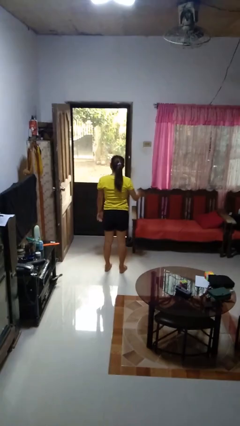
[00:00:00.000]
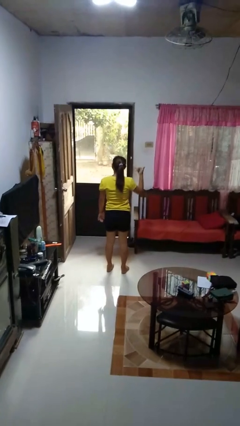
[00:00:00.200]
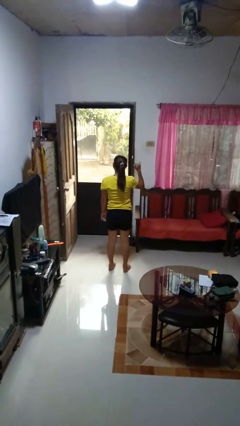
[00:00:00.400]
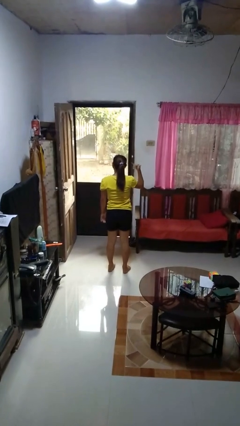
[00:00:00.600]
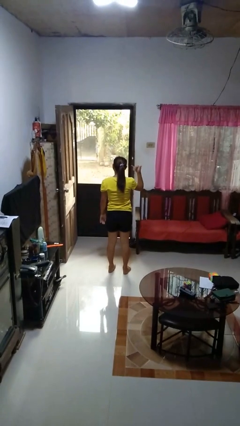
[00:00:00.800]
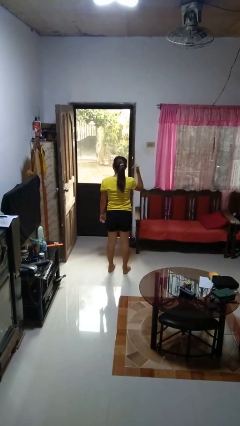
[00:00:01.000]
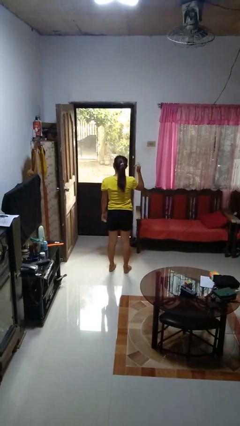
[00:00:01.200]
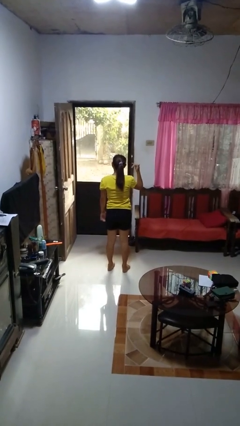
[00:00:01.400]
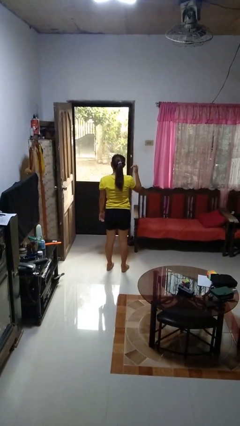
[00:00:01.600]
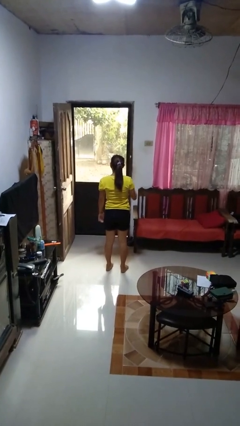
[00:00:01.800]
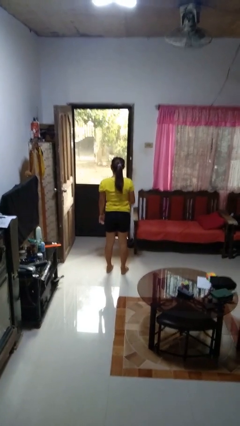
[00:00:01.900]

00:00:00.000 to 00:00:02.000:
person gestures hang loose

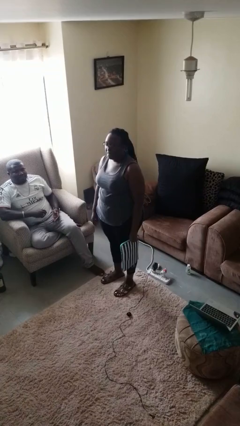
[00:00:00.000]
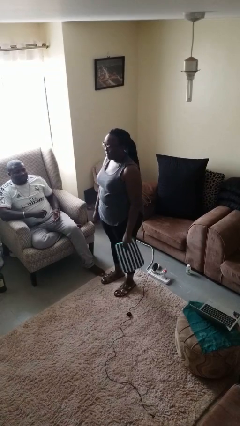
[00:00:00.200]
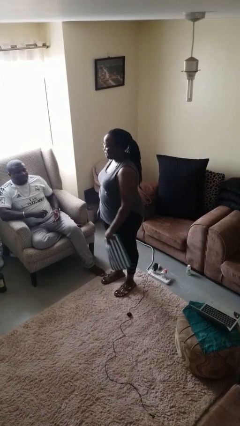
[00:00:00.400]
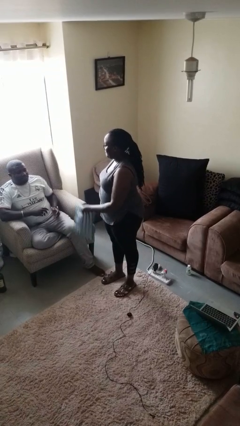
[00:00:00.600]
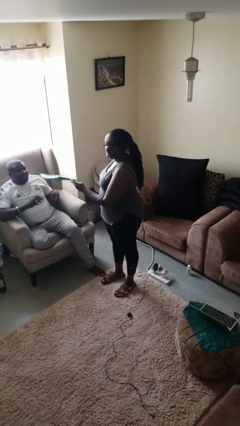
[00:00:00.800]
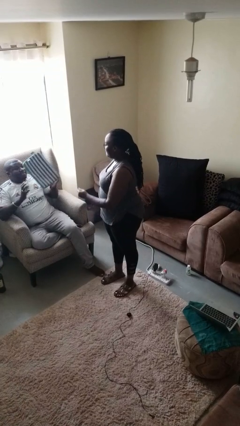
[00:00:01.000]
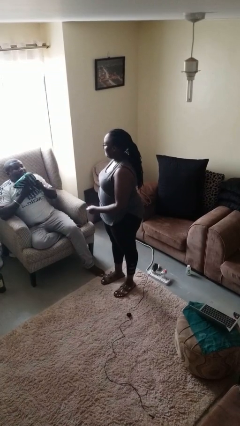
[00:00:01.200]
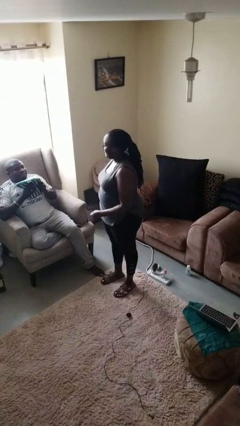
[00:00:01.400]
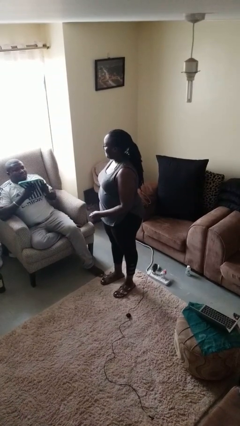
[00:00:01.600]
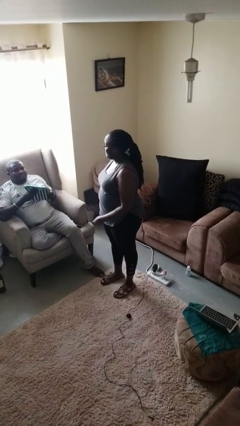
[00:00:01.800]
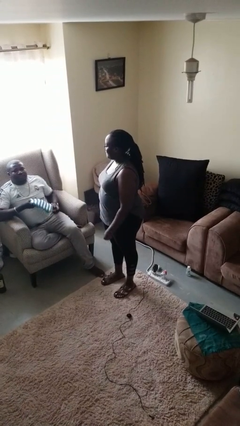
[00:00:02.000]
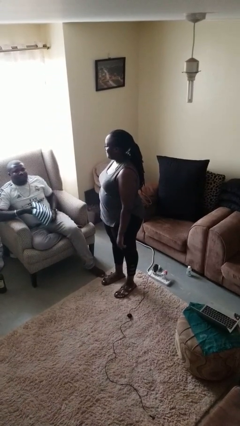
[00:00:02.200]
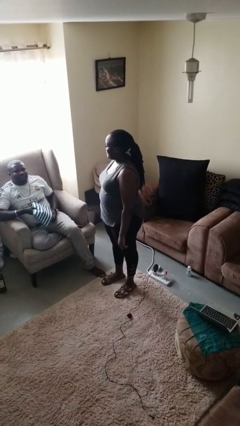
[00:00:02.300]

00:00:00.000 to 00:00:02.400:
person throws object to person

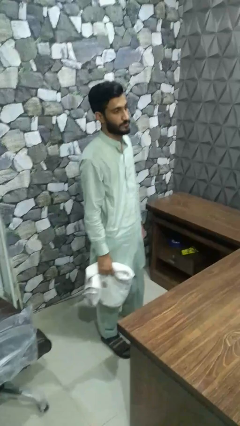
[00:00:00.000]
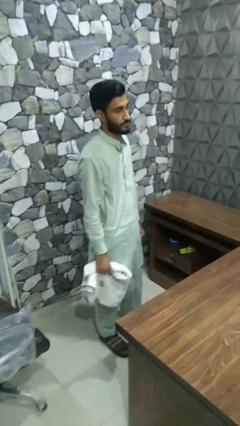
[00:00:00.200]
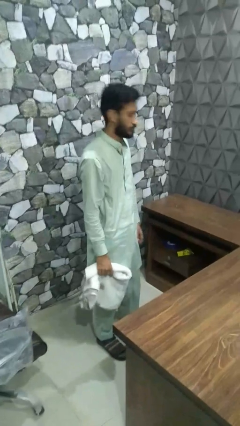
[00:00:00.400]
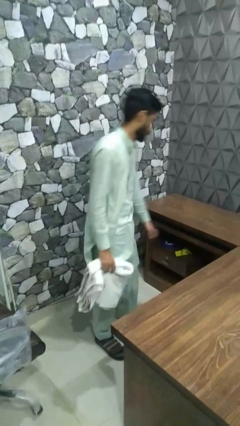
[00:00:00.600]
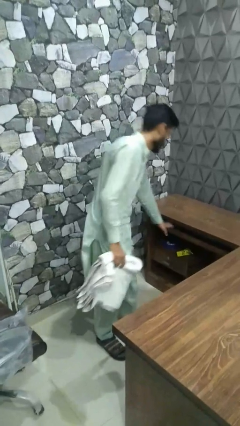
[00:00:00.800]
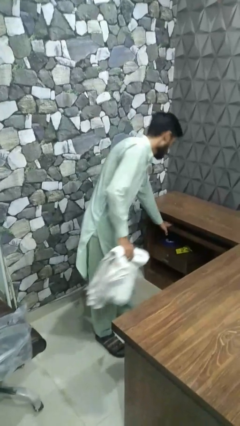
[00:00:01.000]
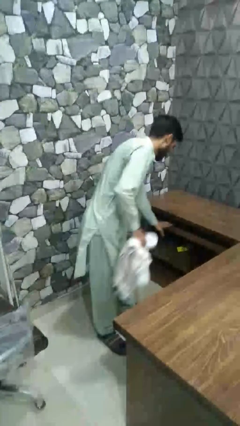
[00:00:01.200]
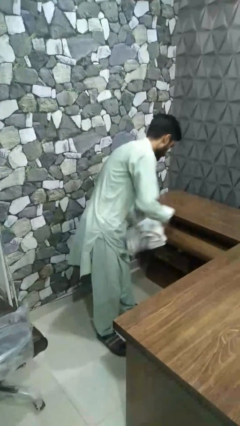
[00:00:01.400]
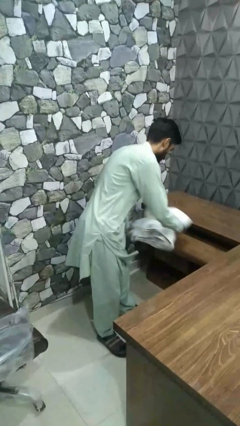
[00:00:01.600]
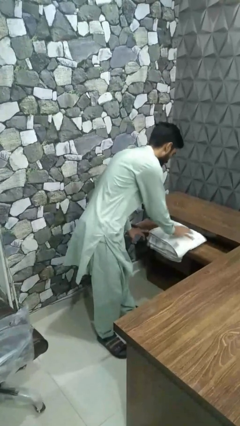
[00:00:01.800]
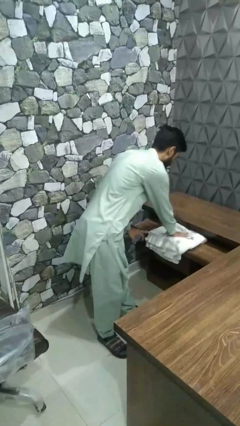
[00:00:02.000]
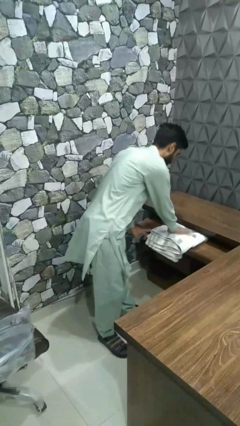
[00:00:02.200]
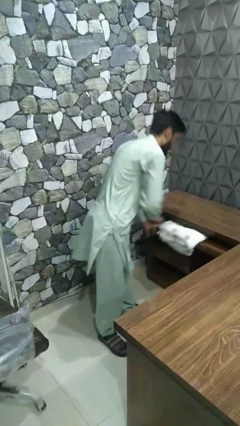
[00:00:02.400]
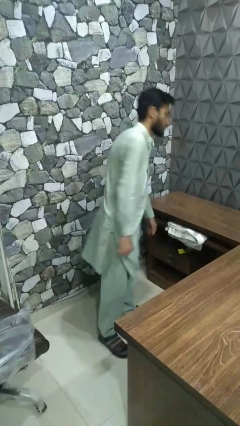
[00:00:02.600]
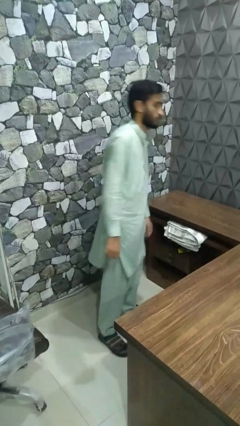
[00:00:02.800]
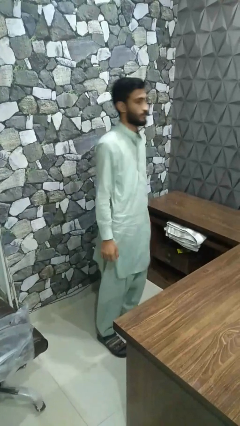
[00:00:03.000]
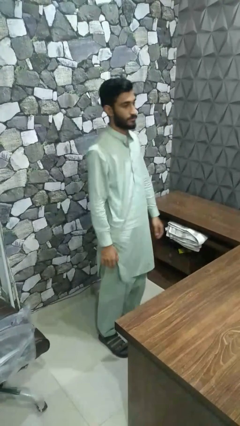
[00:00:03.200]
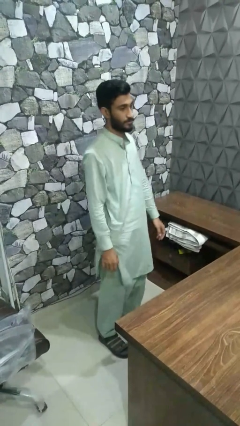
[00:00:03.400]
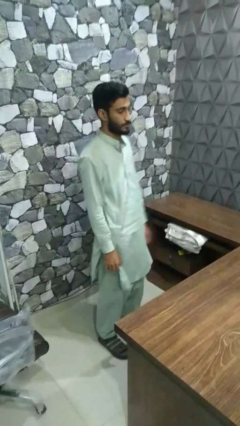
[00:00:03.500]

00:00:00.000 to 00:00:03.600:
person puts clothes into dresser

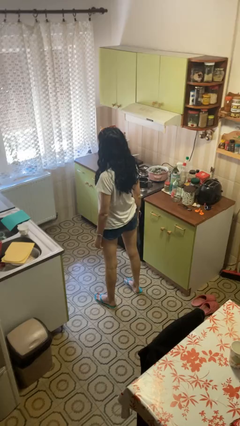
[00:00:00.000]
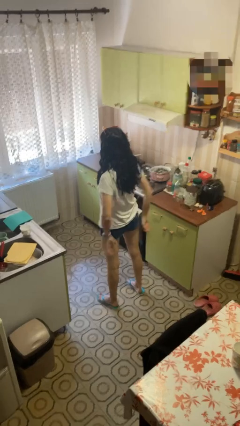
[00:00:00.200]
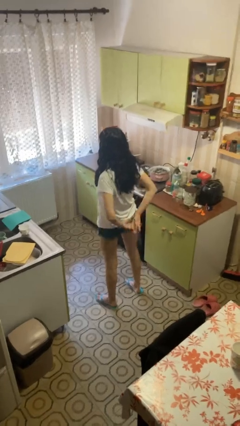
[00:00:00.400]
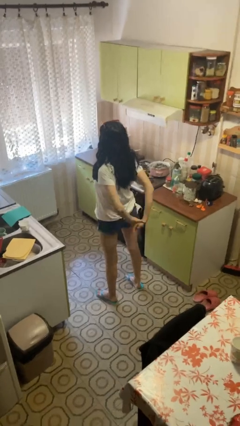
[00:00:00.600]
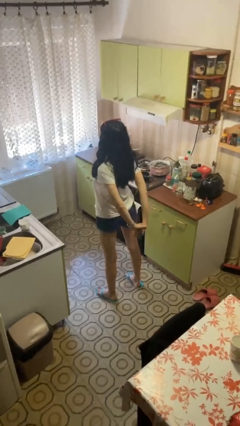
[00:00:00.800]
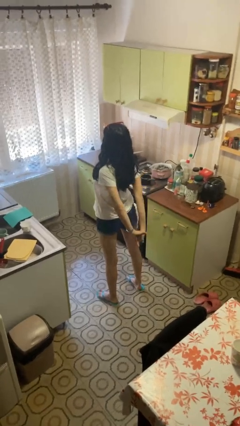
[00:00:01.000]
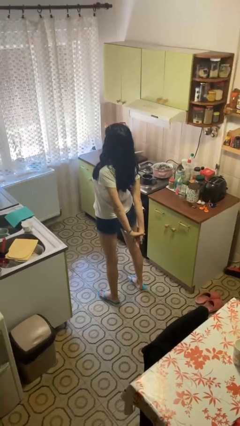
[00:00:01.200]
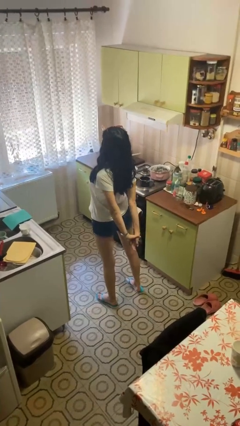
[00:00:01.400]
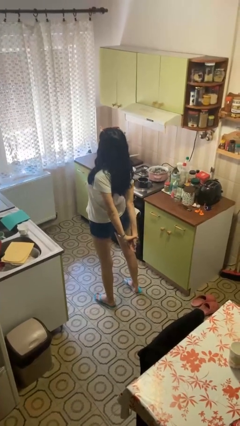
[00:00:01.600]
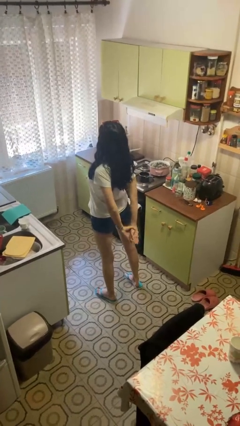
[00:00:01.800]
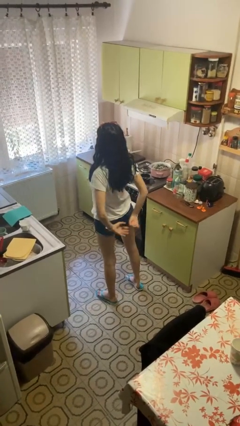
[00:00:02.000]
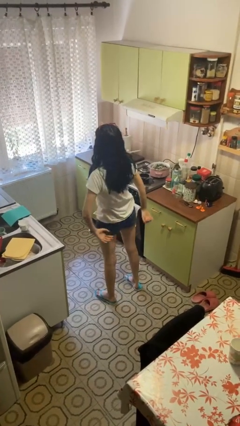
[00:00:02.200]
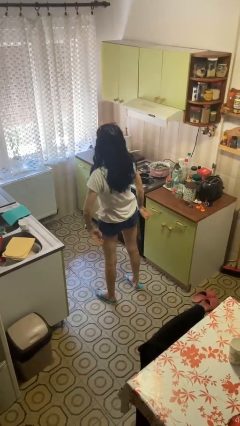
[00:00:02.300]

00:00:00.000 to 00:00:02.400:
person stretches back

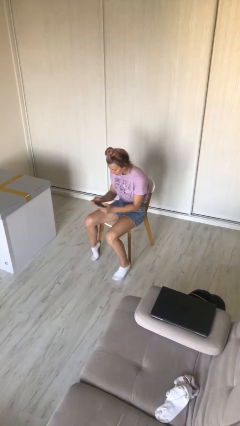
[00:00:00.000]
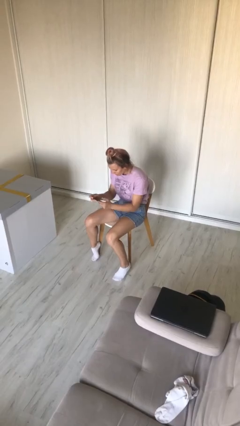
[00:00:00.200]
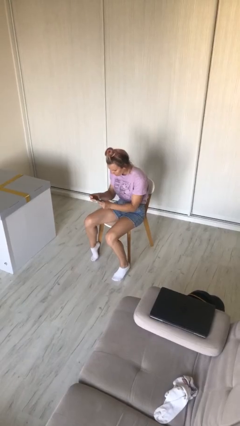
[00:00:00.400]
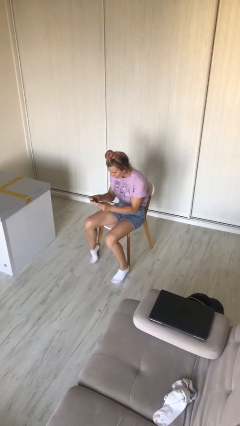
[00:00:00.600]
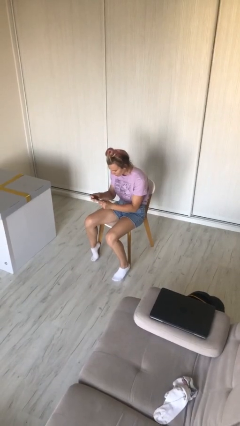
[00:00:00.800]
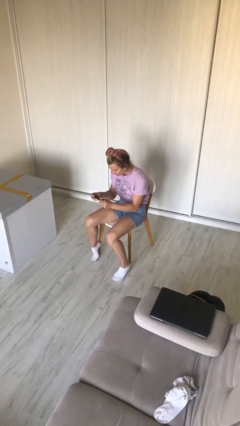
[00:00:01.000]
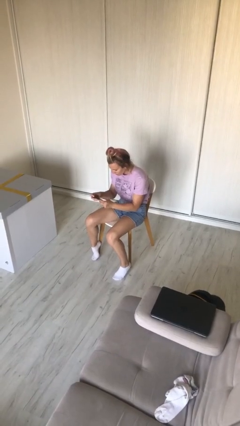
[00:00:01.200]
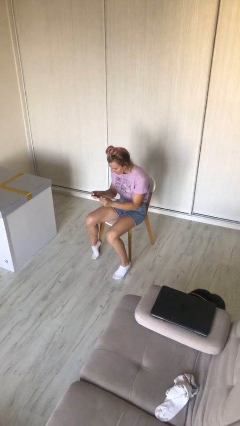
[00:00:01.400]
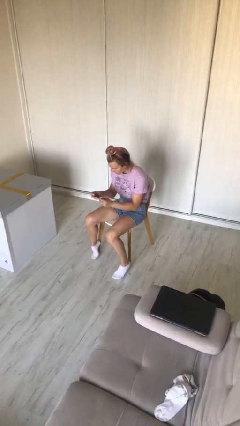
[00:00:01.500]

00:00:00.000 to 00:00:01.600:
person interacts with handheld game

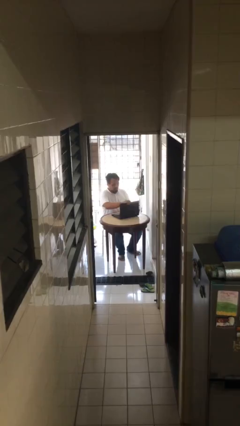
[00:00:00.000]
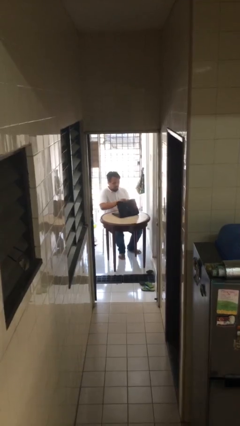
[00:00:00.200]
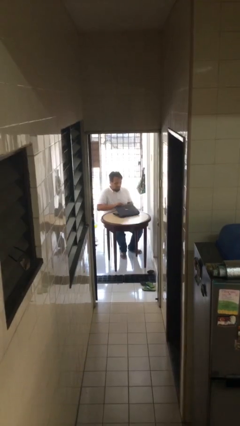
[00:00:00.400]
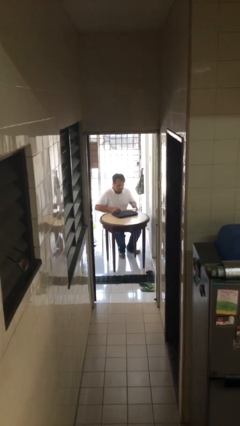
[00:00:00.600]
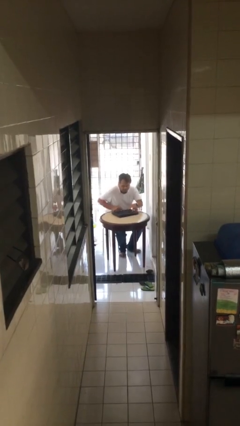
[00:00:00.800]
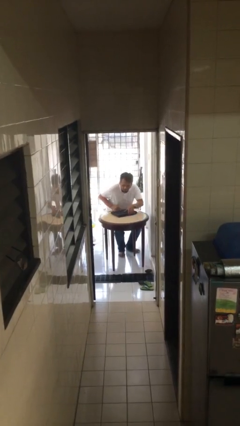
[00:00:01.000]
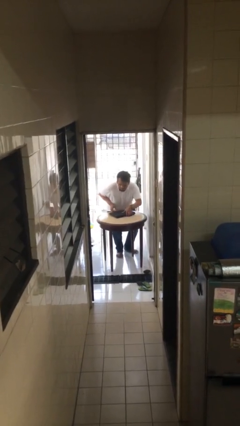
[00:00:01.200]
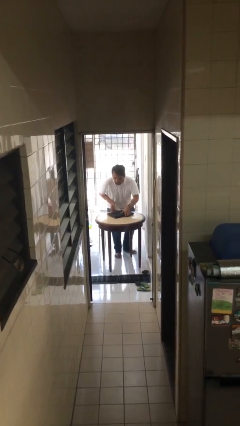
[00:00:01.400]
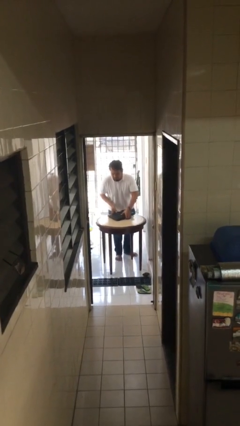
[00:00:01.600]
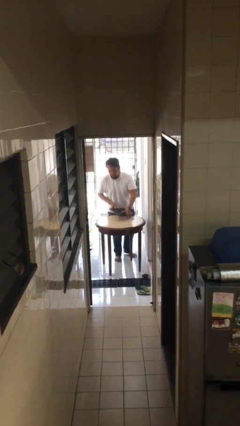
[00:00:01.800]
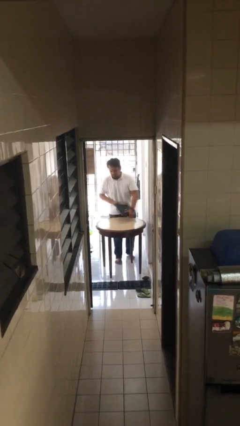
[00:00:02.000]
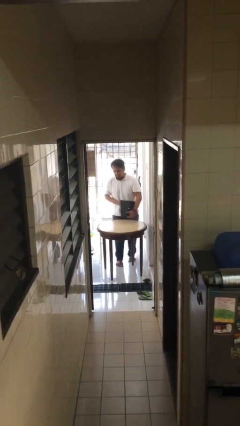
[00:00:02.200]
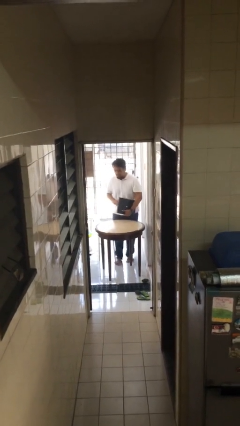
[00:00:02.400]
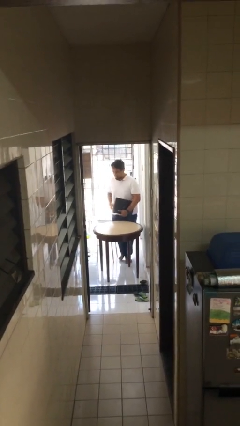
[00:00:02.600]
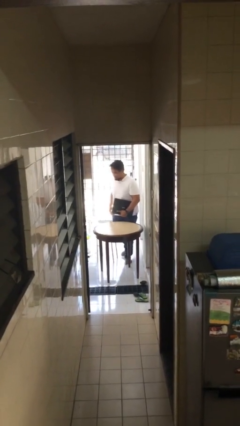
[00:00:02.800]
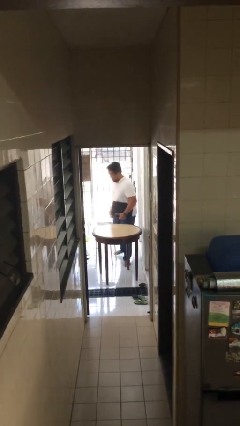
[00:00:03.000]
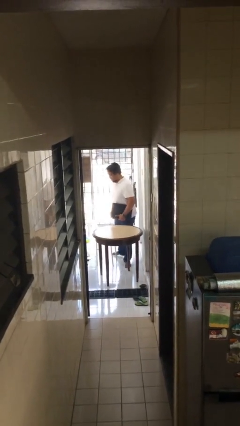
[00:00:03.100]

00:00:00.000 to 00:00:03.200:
person stands up

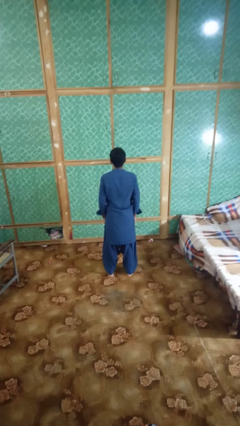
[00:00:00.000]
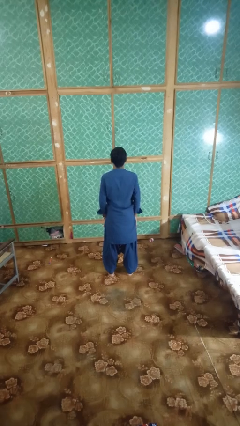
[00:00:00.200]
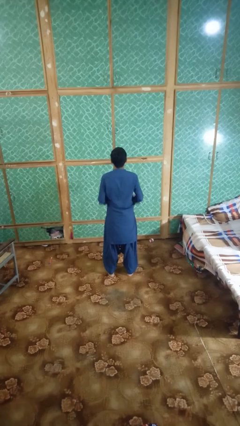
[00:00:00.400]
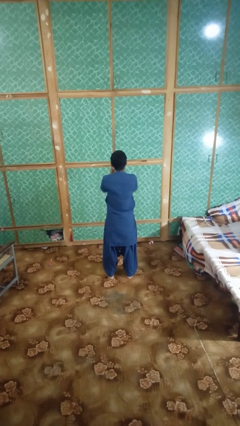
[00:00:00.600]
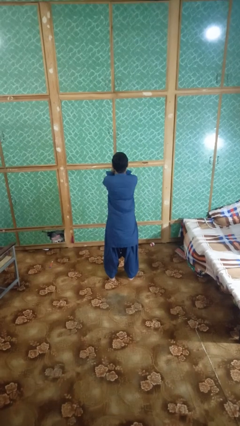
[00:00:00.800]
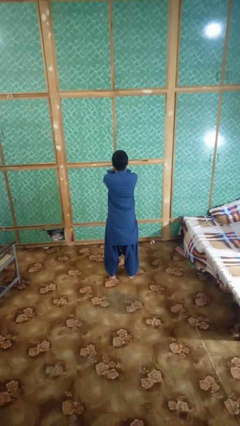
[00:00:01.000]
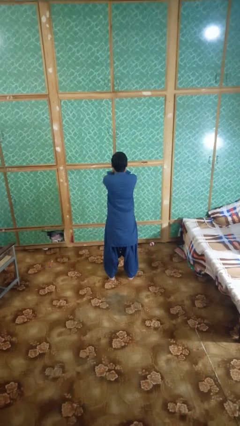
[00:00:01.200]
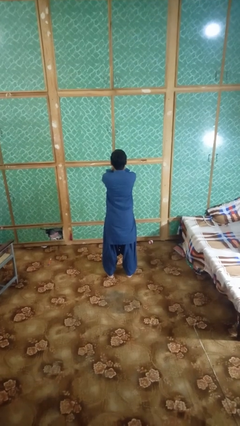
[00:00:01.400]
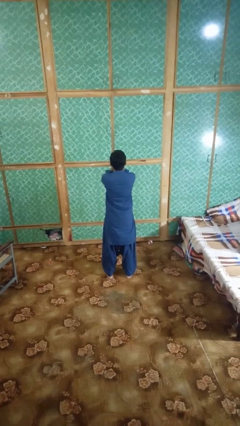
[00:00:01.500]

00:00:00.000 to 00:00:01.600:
person covers face with hands

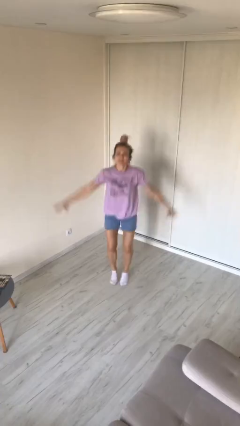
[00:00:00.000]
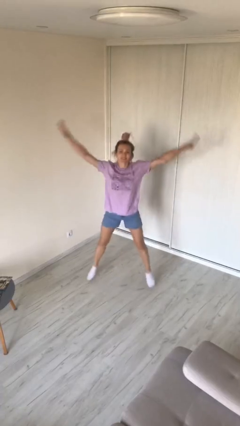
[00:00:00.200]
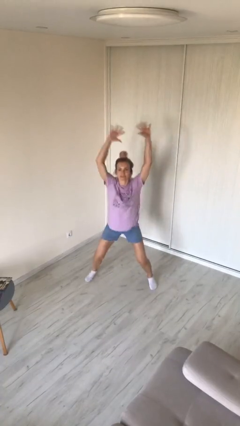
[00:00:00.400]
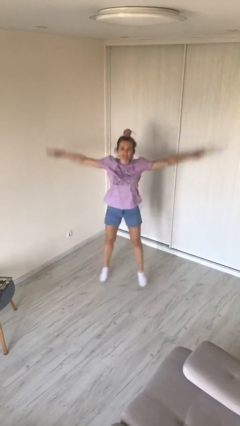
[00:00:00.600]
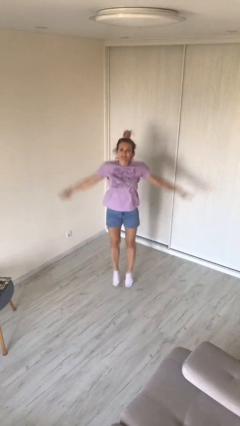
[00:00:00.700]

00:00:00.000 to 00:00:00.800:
person exercises with jumping jacks
